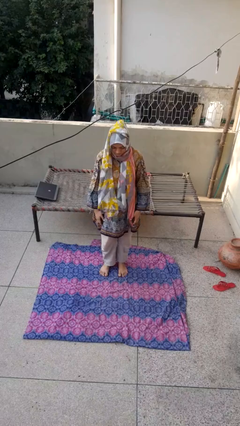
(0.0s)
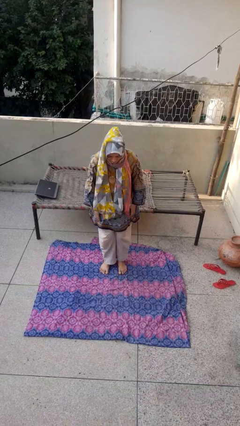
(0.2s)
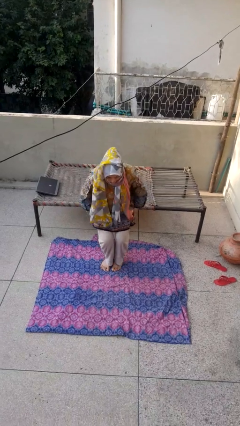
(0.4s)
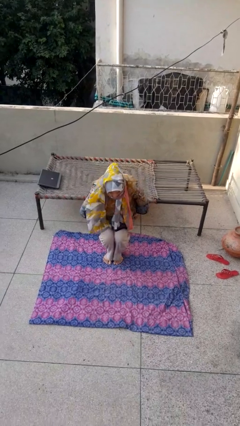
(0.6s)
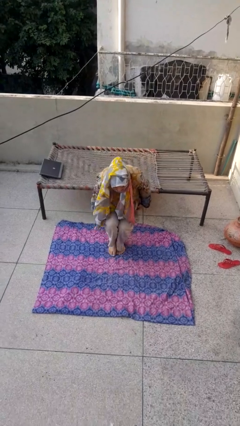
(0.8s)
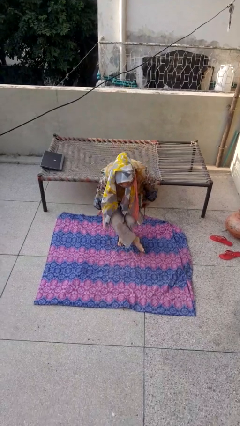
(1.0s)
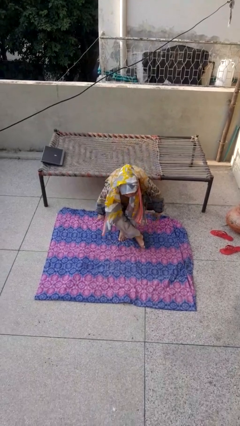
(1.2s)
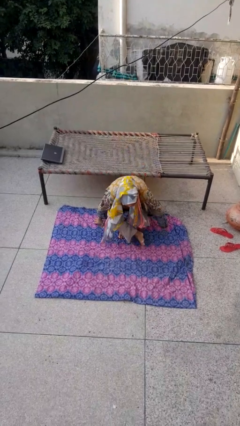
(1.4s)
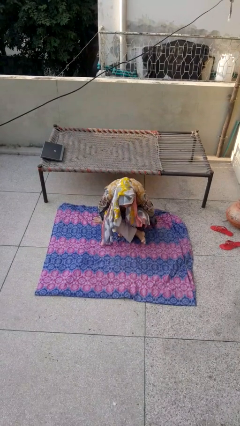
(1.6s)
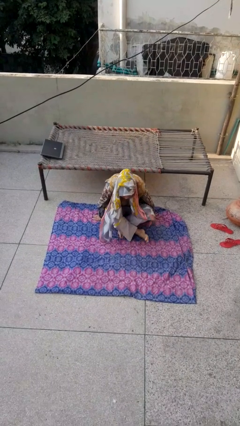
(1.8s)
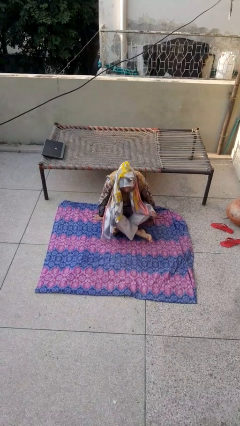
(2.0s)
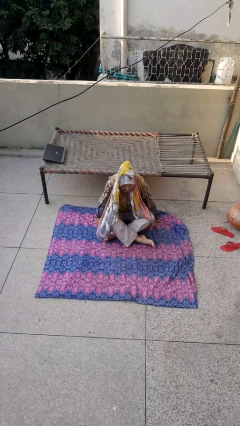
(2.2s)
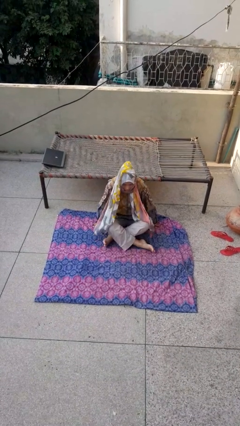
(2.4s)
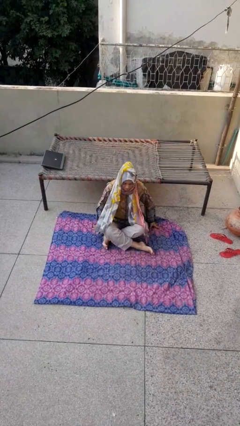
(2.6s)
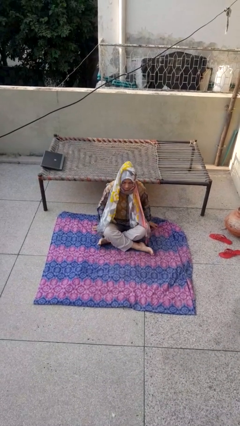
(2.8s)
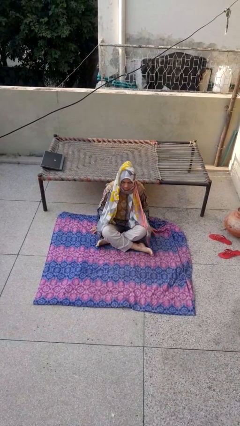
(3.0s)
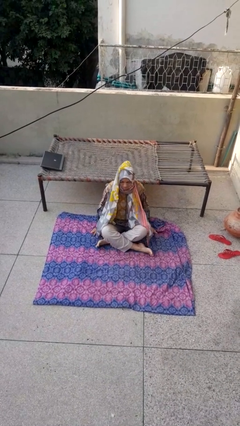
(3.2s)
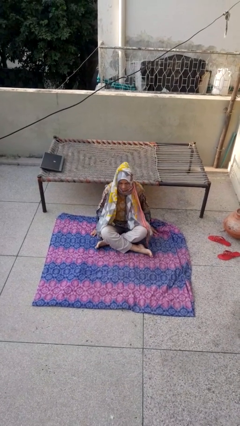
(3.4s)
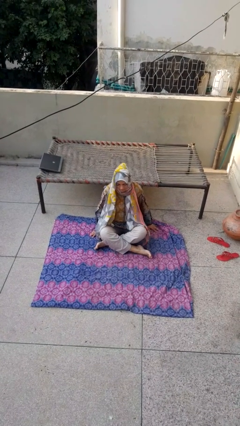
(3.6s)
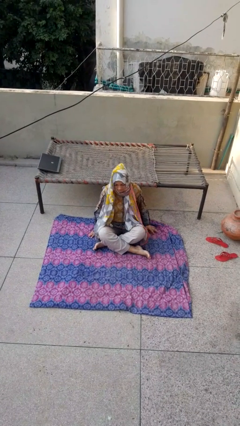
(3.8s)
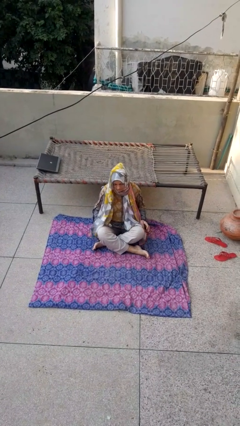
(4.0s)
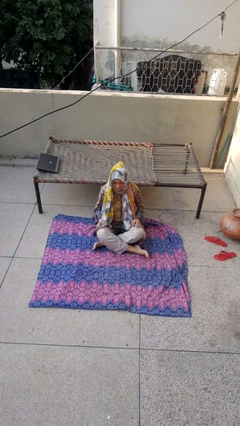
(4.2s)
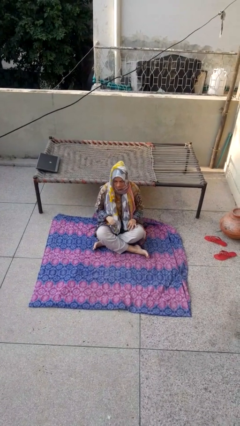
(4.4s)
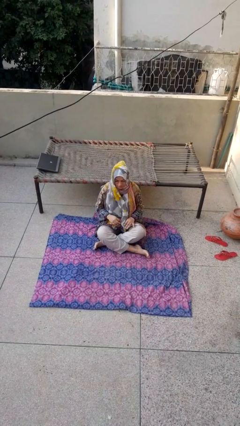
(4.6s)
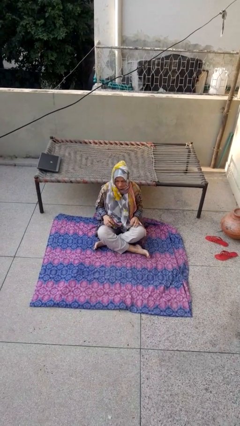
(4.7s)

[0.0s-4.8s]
person sits crisscross

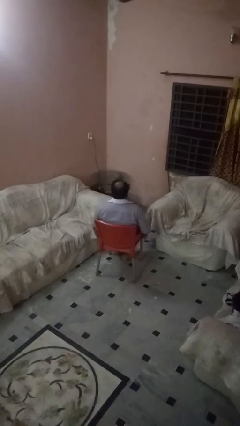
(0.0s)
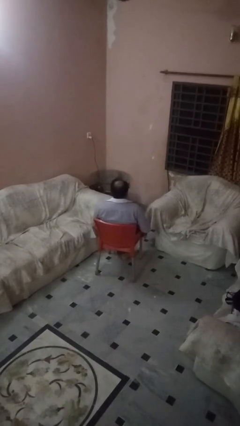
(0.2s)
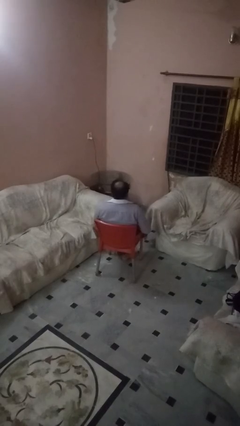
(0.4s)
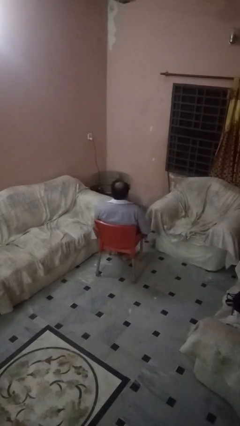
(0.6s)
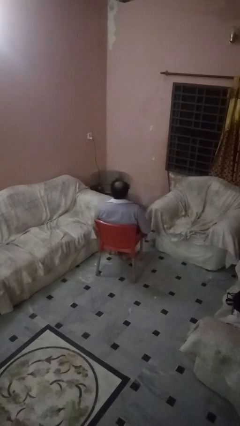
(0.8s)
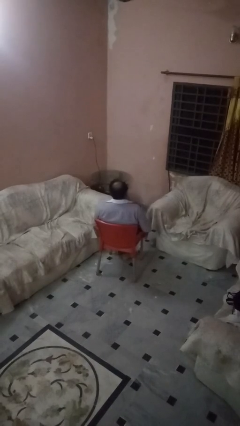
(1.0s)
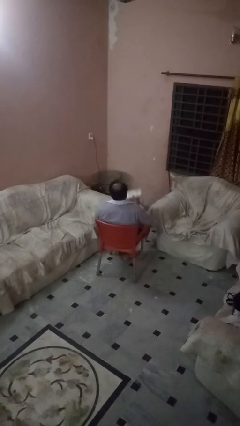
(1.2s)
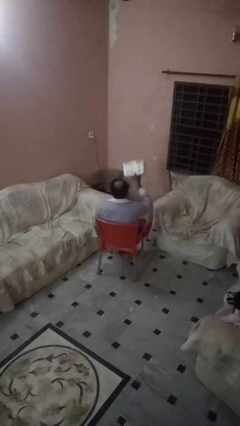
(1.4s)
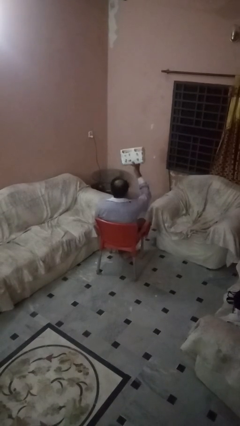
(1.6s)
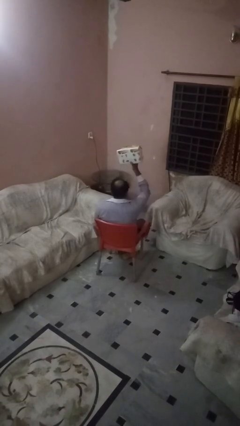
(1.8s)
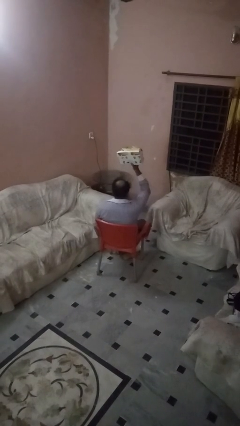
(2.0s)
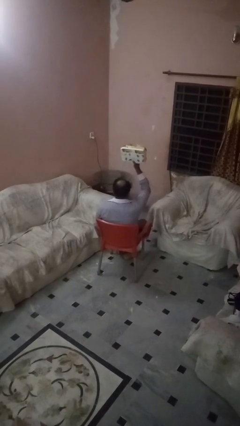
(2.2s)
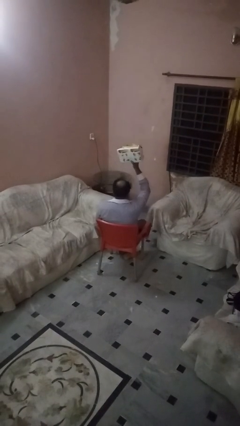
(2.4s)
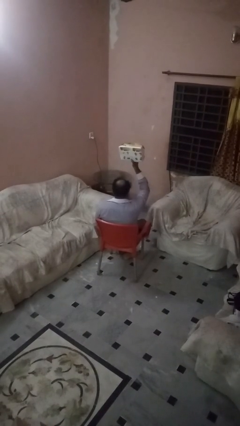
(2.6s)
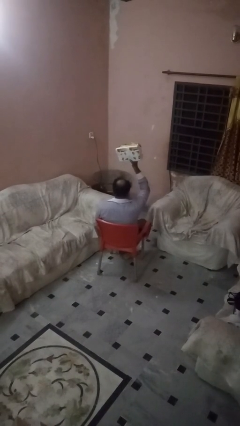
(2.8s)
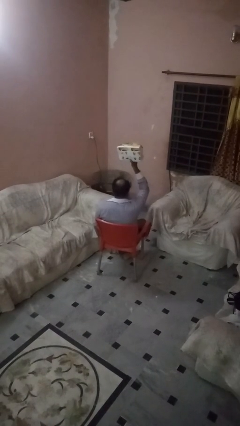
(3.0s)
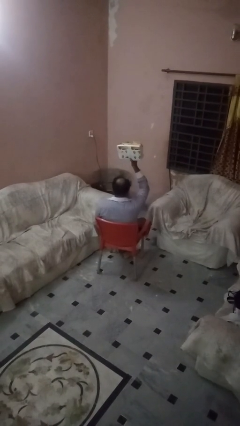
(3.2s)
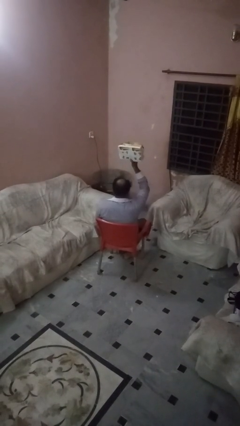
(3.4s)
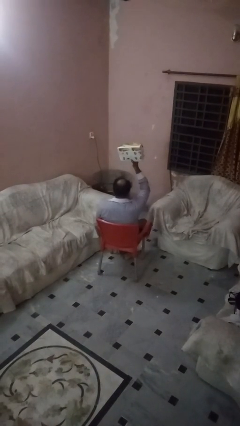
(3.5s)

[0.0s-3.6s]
person holds object above head

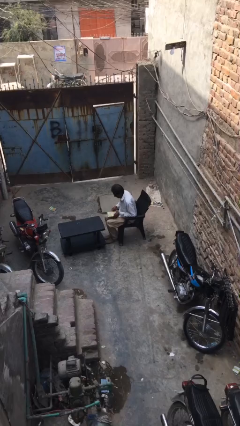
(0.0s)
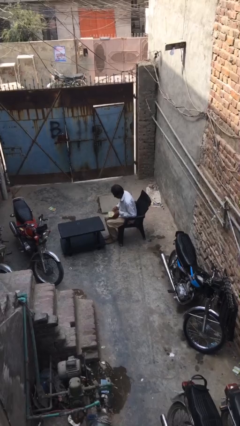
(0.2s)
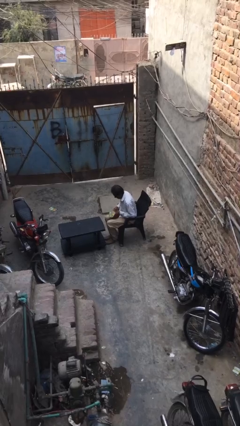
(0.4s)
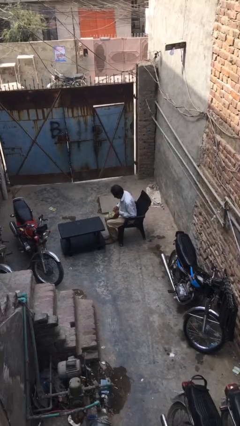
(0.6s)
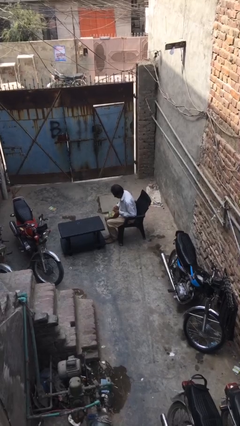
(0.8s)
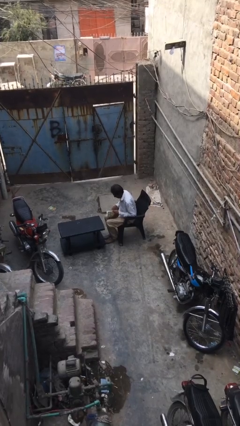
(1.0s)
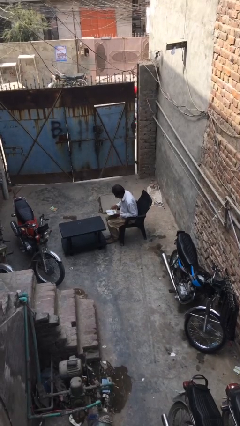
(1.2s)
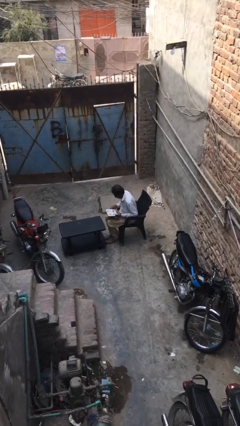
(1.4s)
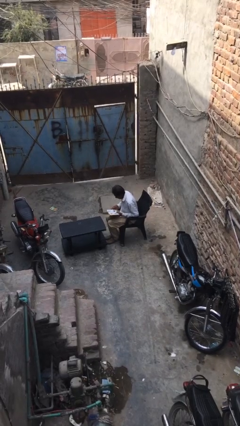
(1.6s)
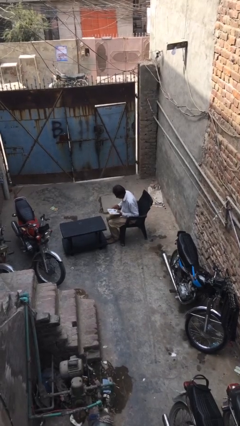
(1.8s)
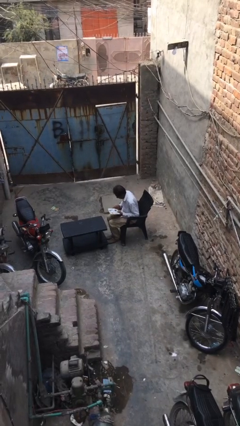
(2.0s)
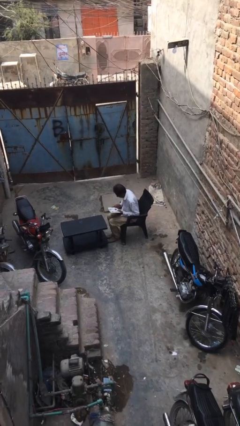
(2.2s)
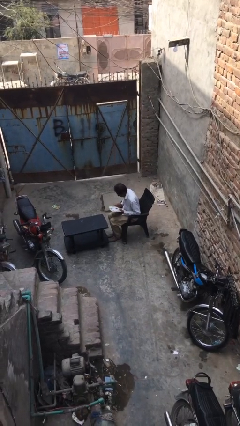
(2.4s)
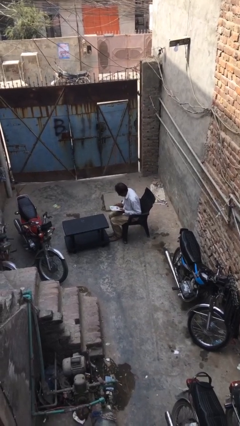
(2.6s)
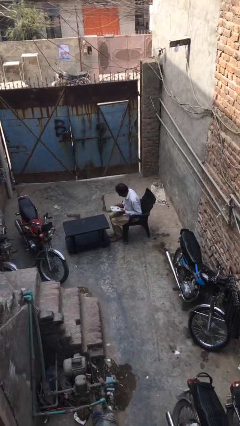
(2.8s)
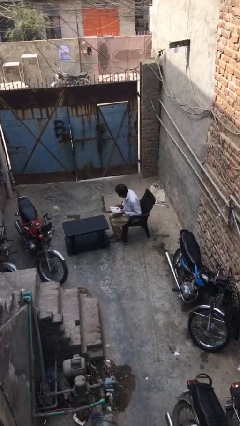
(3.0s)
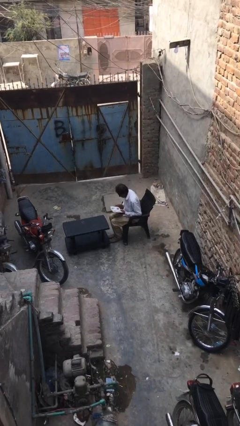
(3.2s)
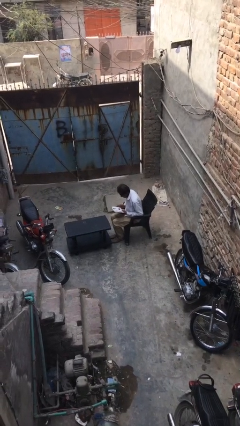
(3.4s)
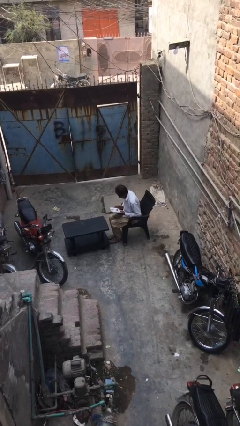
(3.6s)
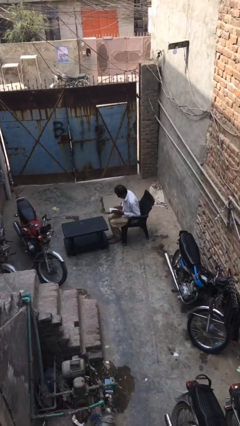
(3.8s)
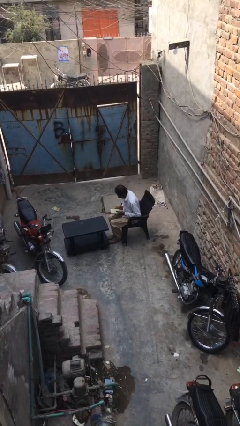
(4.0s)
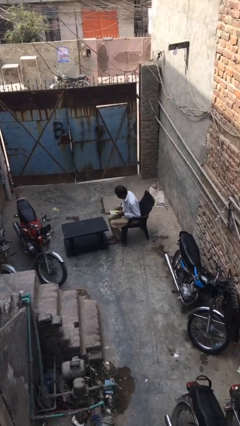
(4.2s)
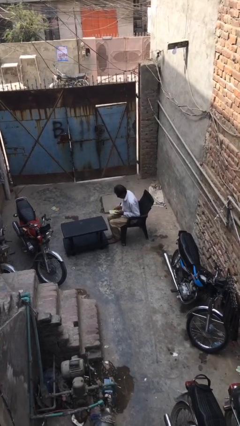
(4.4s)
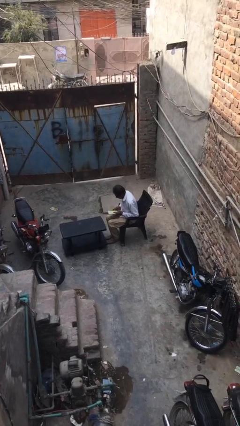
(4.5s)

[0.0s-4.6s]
person reads document

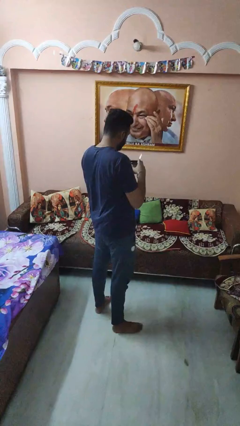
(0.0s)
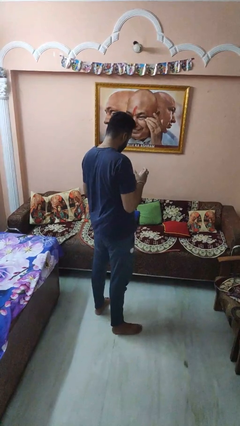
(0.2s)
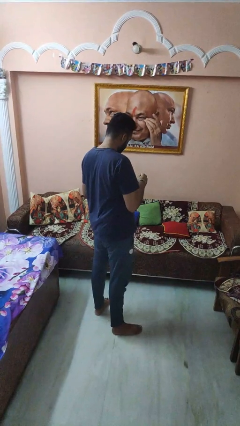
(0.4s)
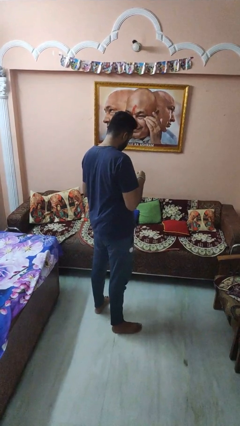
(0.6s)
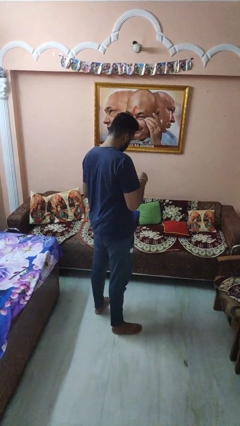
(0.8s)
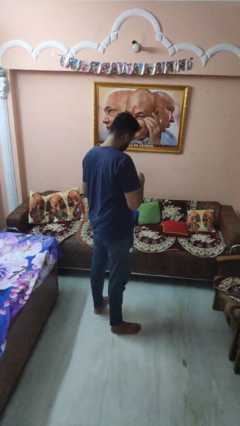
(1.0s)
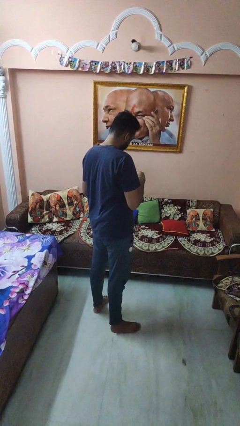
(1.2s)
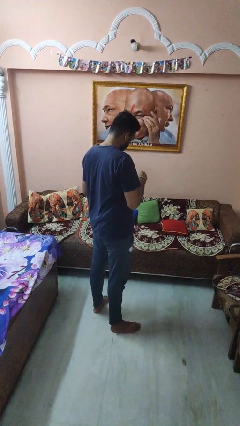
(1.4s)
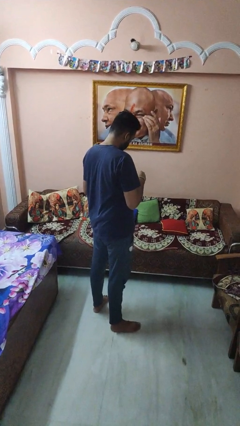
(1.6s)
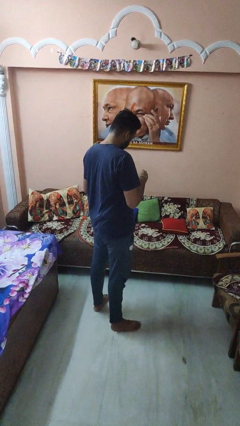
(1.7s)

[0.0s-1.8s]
person stirs mug

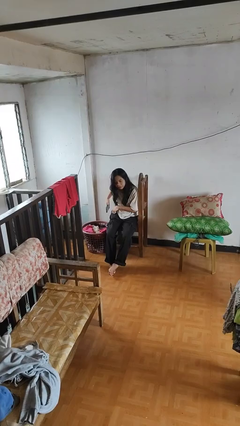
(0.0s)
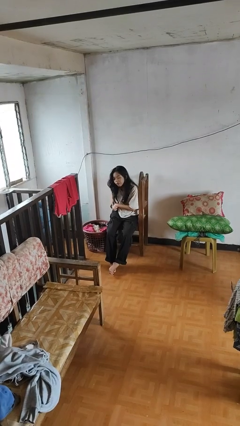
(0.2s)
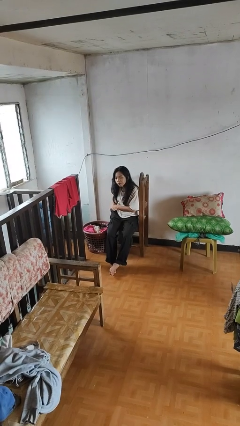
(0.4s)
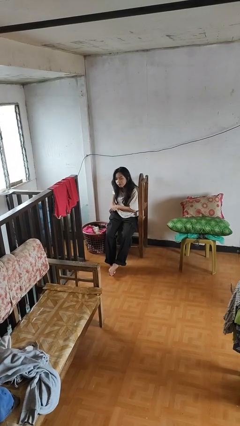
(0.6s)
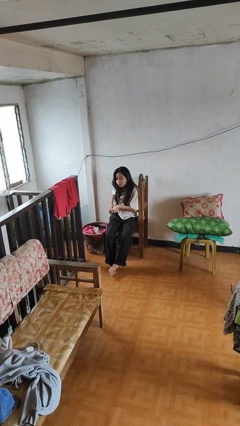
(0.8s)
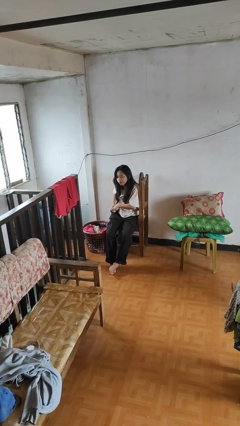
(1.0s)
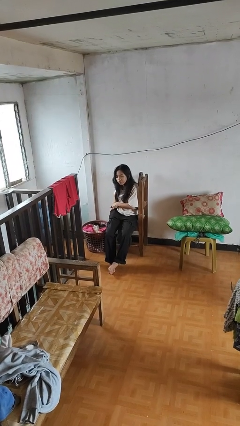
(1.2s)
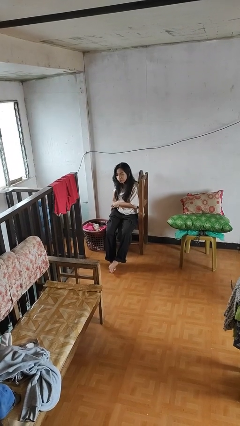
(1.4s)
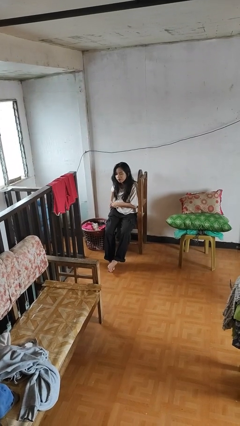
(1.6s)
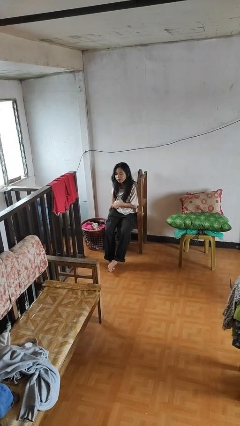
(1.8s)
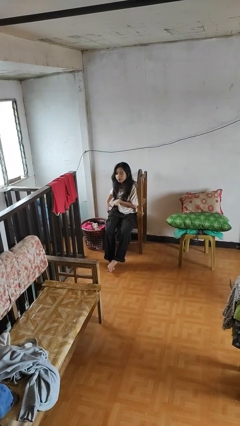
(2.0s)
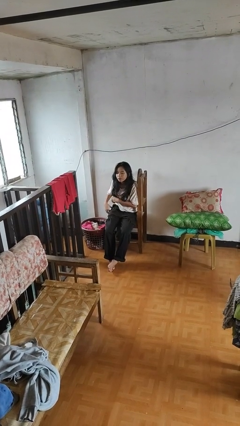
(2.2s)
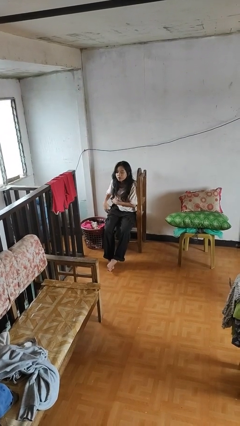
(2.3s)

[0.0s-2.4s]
person puts phone into pocket

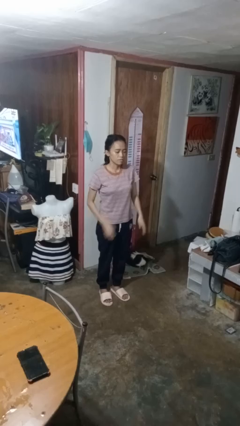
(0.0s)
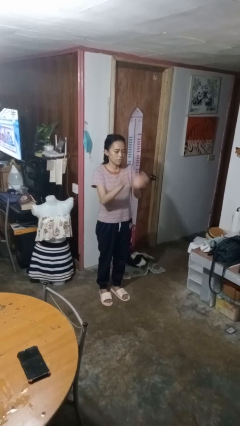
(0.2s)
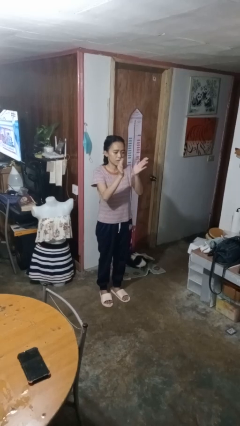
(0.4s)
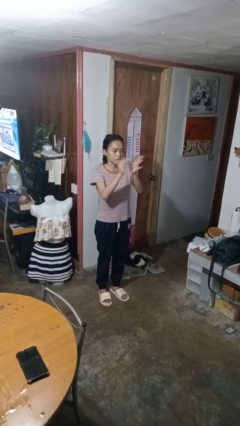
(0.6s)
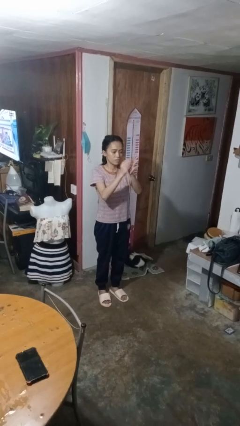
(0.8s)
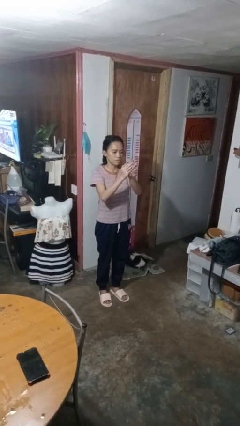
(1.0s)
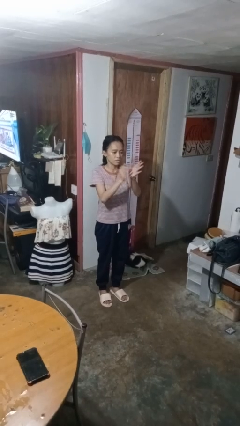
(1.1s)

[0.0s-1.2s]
person claps hands
